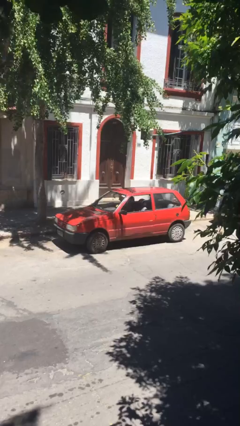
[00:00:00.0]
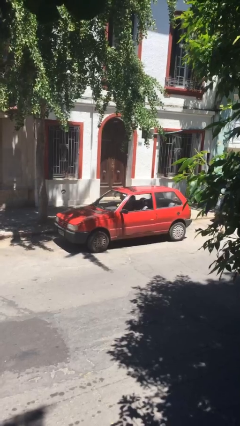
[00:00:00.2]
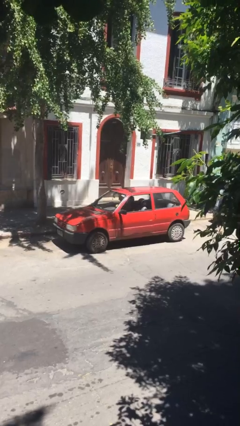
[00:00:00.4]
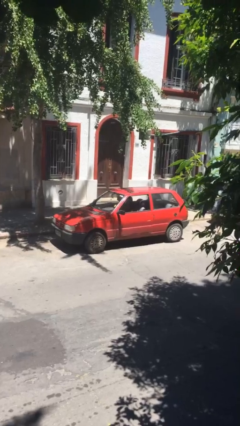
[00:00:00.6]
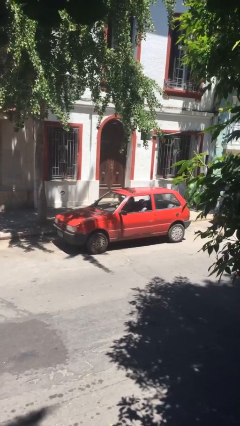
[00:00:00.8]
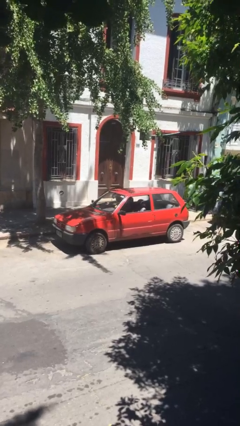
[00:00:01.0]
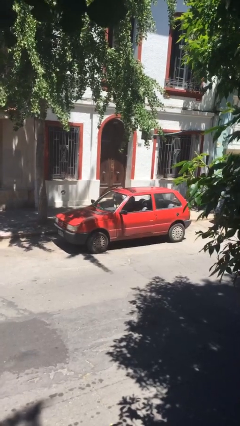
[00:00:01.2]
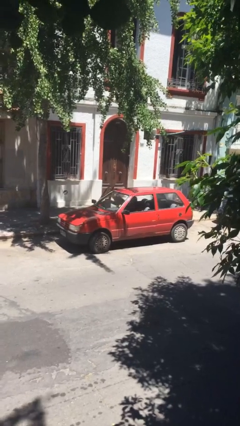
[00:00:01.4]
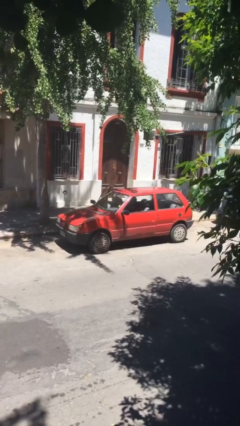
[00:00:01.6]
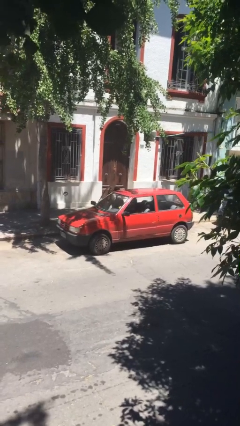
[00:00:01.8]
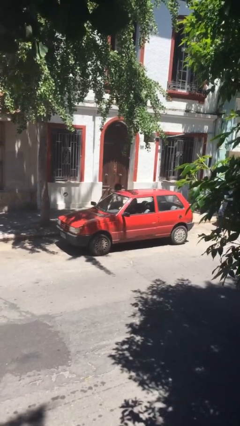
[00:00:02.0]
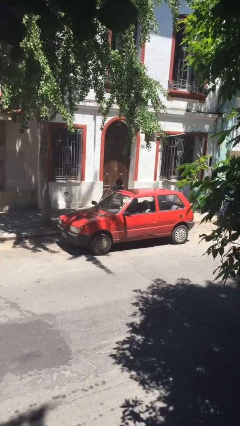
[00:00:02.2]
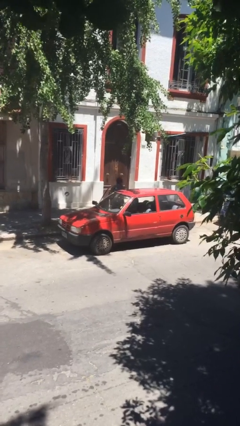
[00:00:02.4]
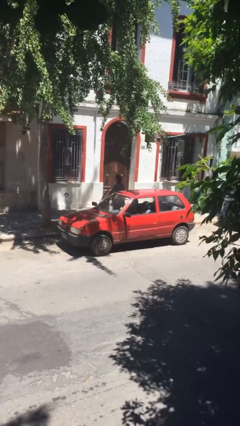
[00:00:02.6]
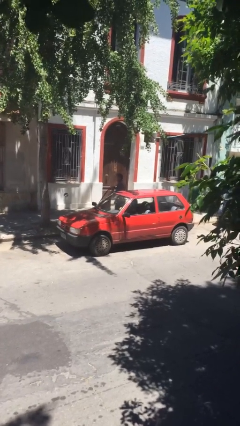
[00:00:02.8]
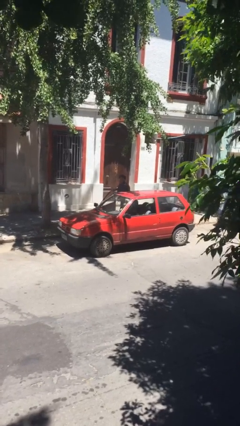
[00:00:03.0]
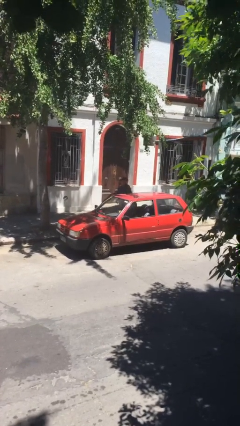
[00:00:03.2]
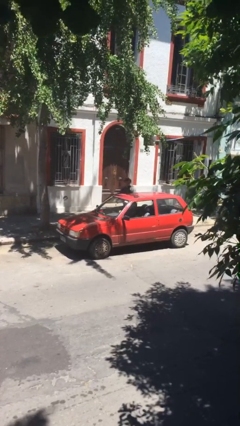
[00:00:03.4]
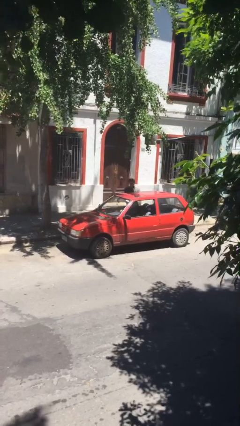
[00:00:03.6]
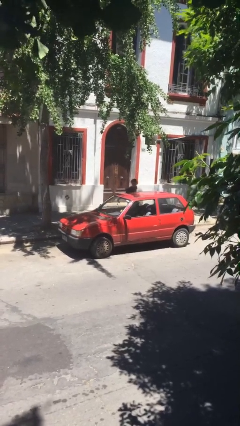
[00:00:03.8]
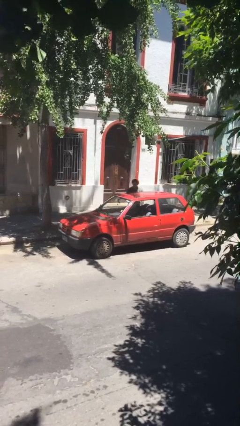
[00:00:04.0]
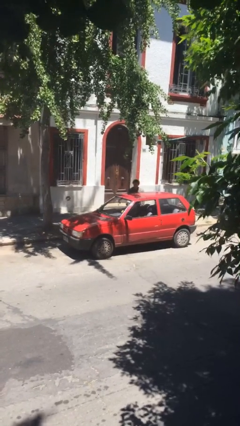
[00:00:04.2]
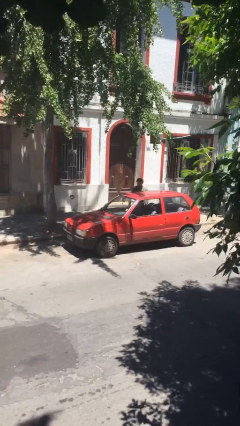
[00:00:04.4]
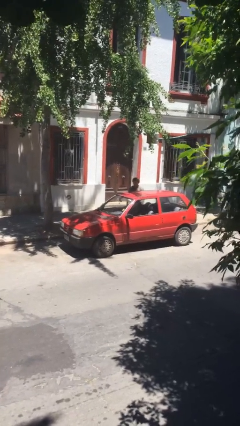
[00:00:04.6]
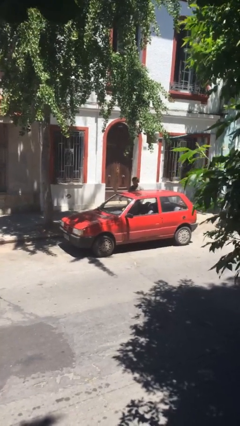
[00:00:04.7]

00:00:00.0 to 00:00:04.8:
car drops off person

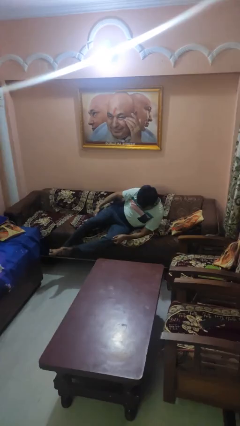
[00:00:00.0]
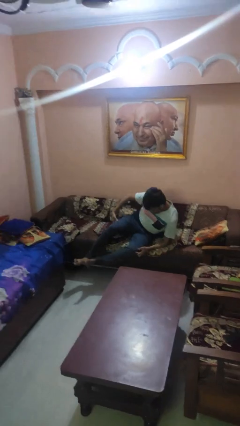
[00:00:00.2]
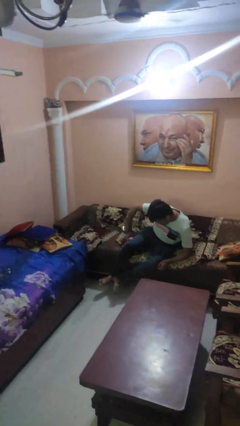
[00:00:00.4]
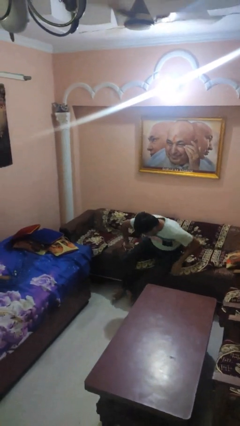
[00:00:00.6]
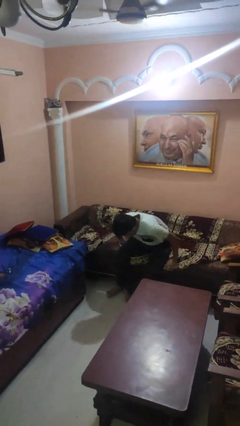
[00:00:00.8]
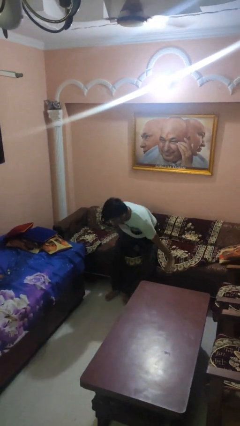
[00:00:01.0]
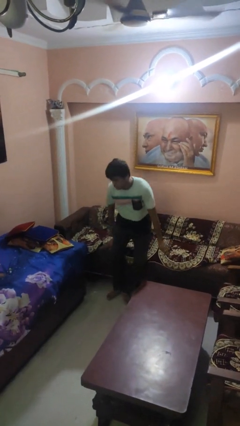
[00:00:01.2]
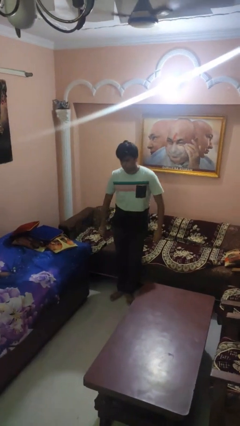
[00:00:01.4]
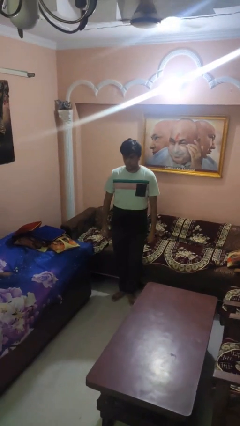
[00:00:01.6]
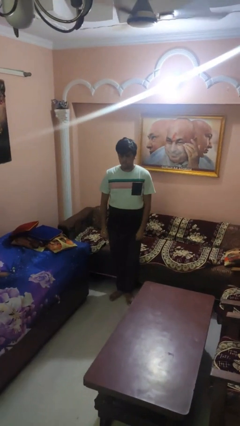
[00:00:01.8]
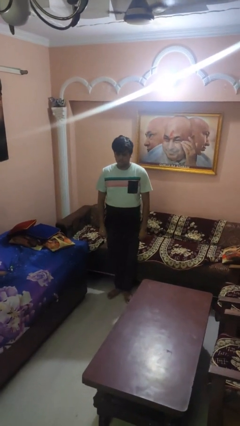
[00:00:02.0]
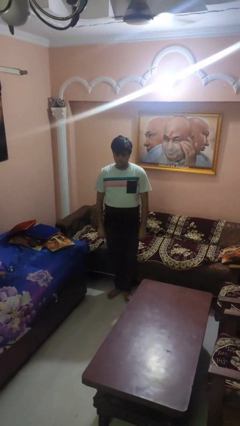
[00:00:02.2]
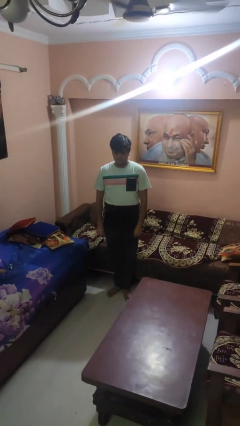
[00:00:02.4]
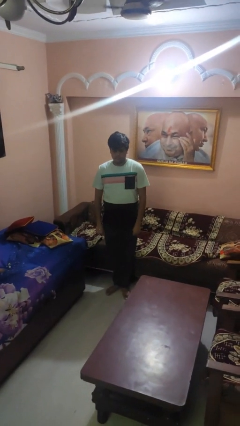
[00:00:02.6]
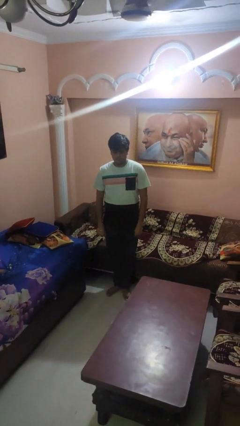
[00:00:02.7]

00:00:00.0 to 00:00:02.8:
person stands up

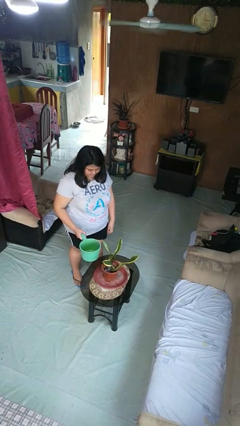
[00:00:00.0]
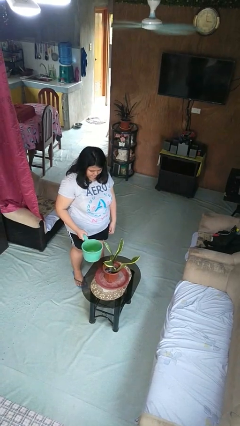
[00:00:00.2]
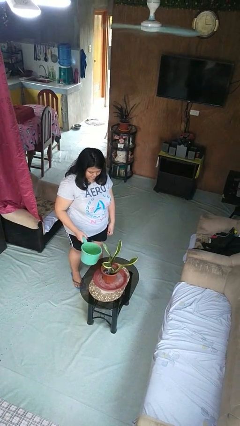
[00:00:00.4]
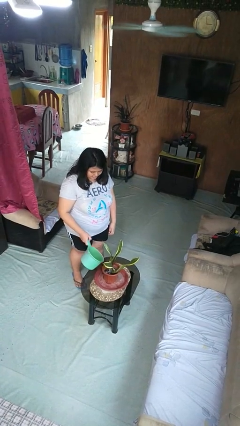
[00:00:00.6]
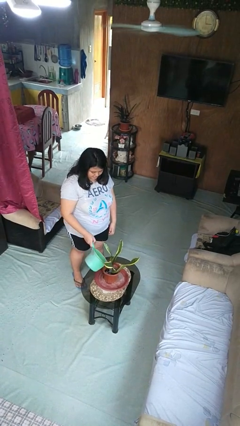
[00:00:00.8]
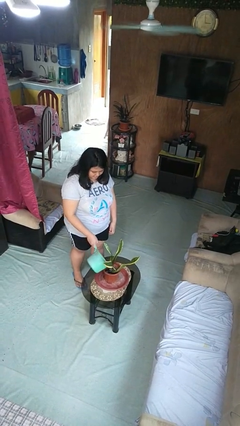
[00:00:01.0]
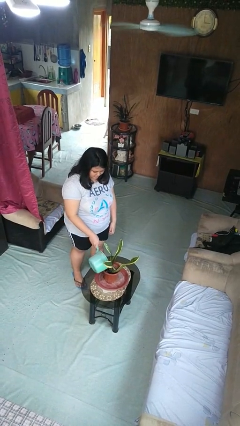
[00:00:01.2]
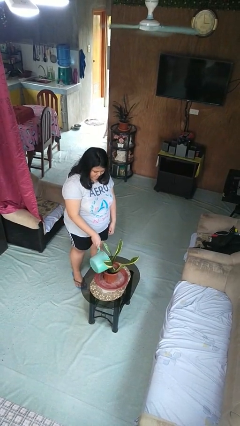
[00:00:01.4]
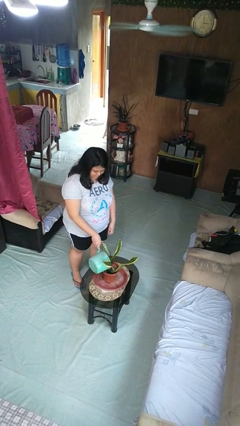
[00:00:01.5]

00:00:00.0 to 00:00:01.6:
person waters houseplant

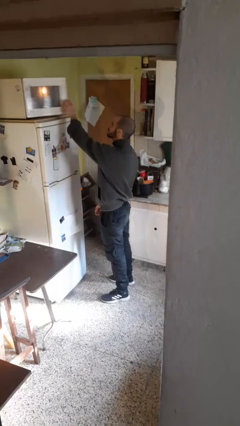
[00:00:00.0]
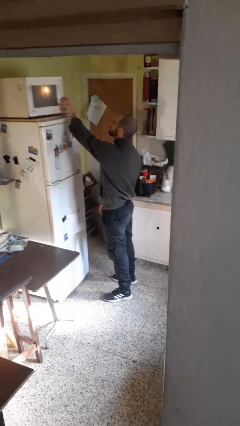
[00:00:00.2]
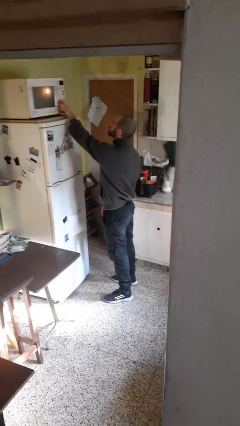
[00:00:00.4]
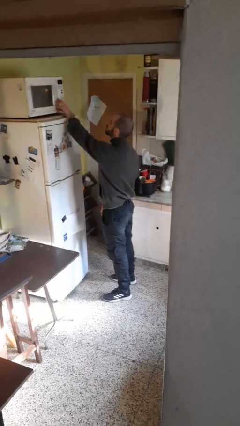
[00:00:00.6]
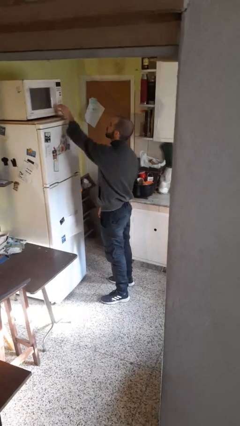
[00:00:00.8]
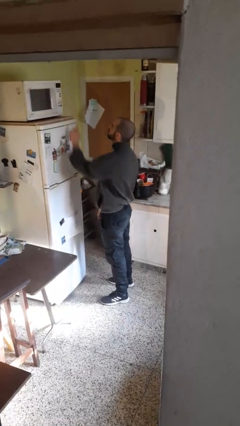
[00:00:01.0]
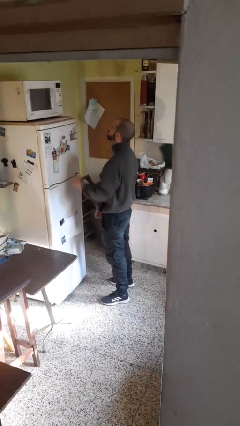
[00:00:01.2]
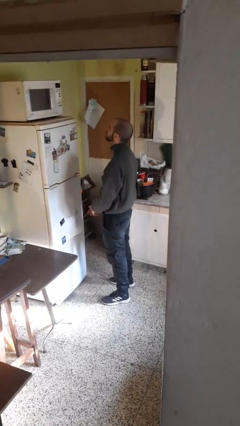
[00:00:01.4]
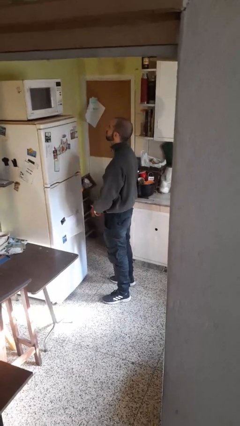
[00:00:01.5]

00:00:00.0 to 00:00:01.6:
person closes microwave

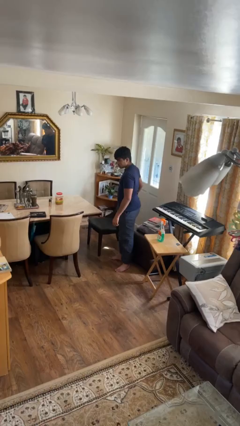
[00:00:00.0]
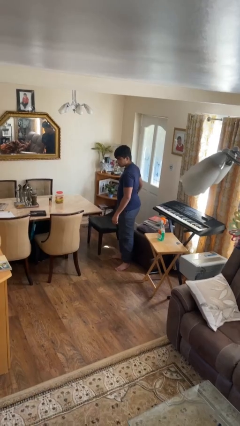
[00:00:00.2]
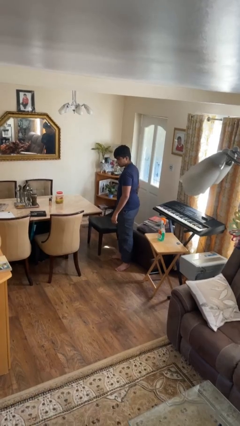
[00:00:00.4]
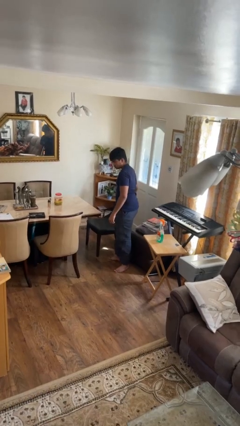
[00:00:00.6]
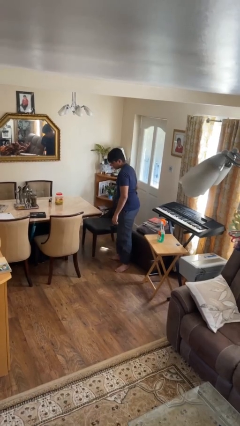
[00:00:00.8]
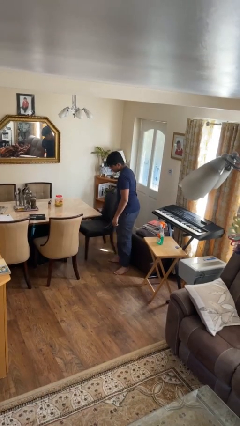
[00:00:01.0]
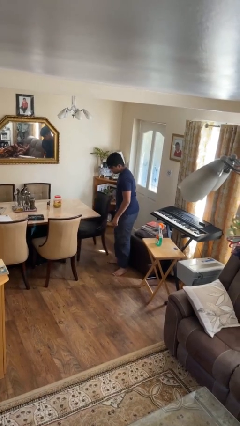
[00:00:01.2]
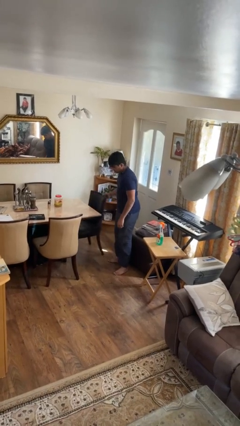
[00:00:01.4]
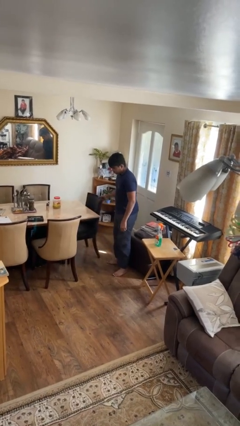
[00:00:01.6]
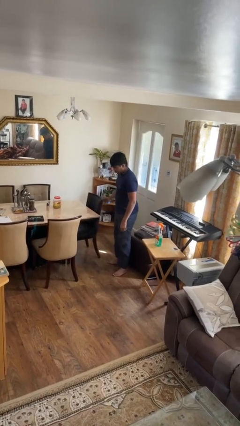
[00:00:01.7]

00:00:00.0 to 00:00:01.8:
person pushes in chair

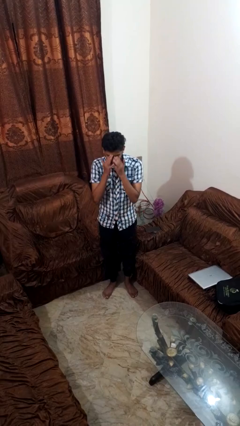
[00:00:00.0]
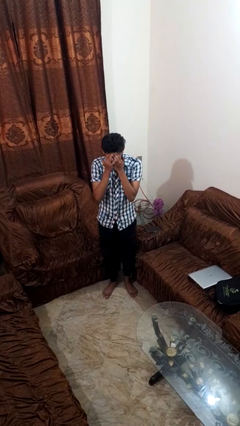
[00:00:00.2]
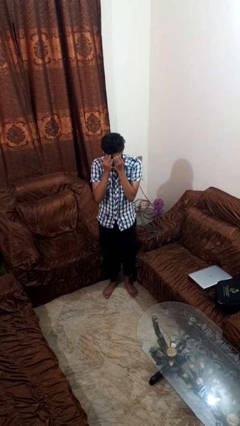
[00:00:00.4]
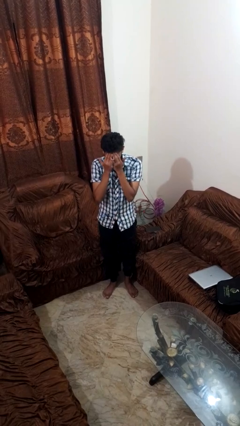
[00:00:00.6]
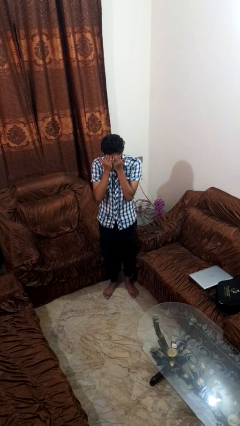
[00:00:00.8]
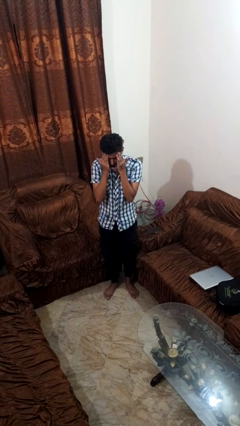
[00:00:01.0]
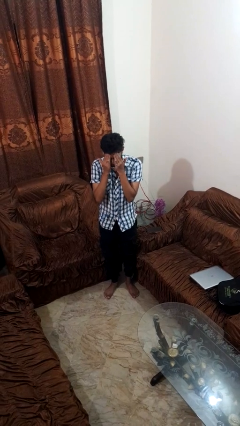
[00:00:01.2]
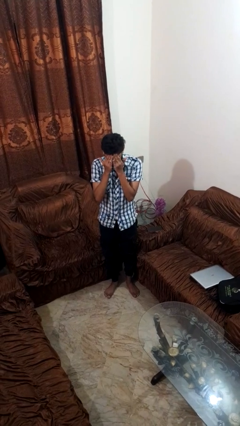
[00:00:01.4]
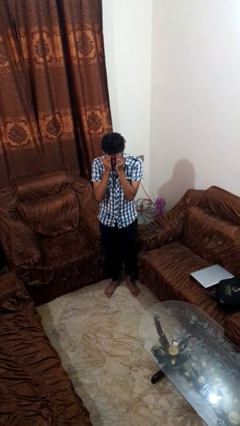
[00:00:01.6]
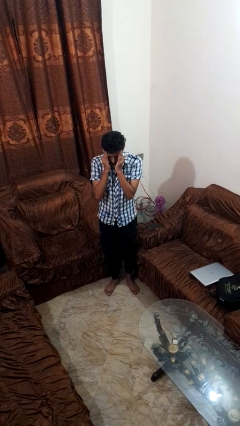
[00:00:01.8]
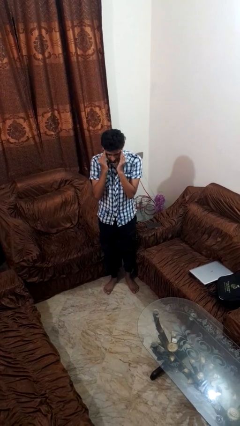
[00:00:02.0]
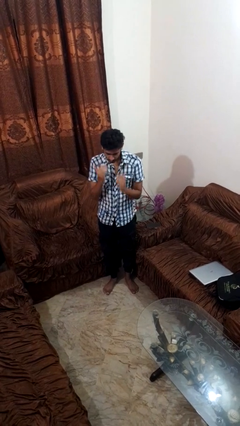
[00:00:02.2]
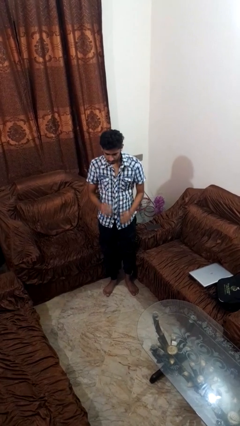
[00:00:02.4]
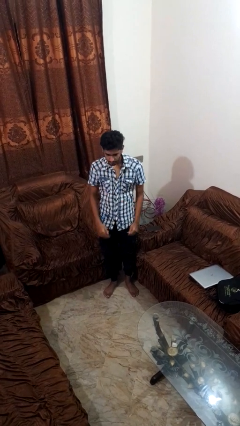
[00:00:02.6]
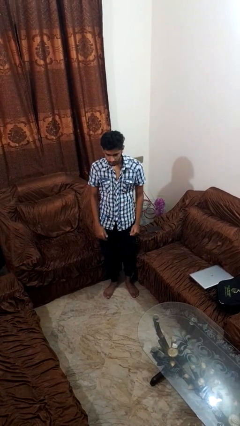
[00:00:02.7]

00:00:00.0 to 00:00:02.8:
person scratches face

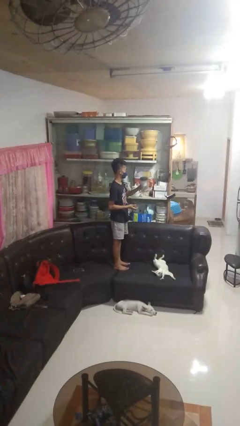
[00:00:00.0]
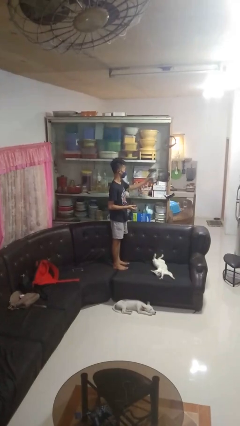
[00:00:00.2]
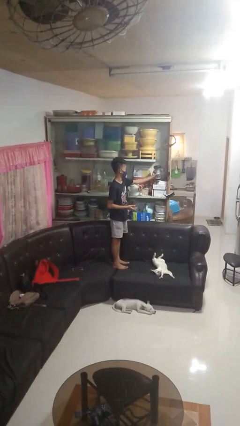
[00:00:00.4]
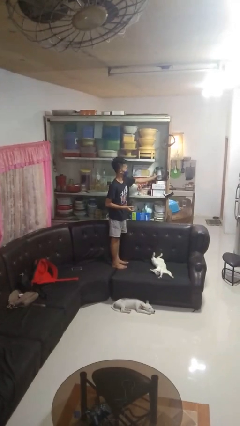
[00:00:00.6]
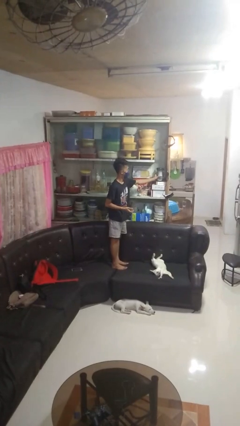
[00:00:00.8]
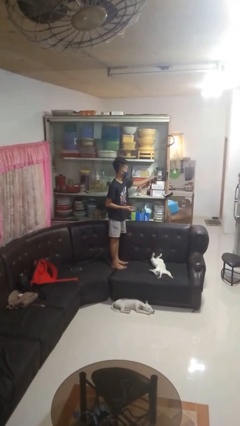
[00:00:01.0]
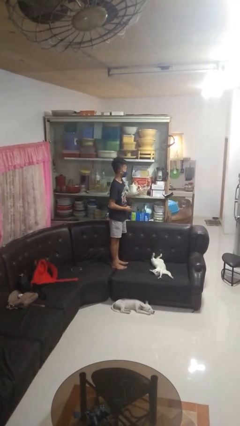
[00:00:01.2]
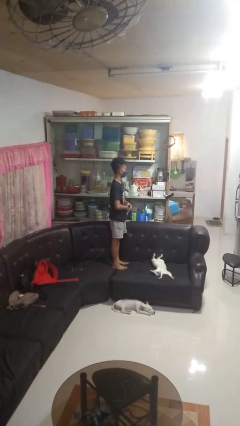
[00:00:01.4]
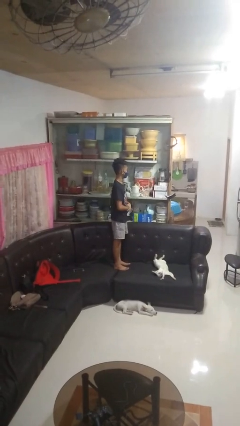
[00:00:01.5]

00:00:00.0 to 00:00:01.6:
person puts down object into cabinet
